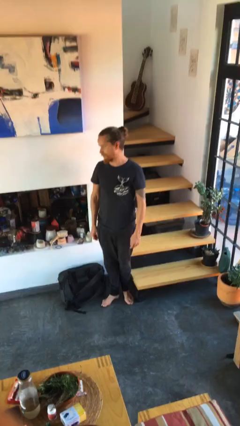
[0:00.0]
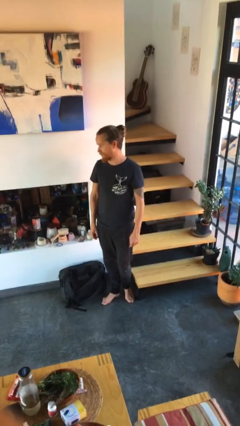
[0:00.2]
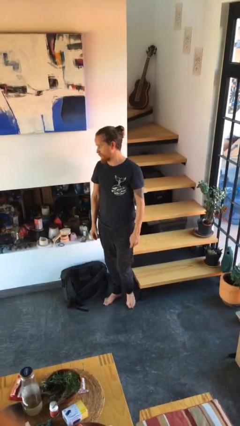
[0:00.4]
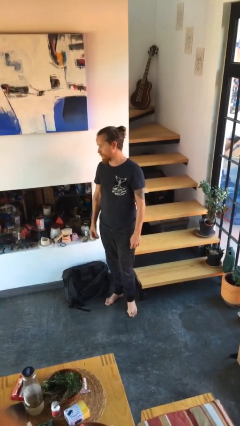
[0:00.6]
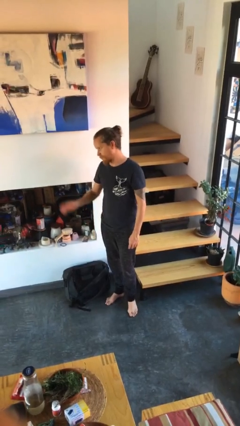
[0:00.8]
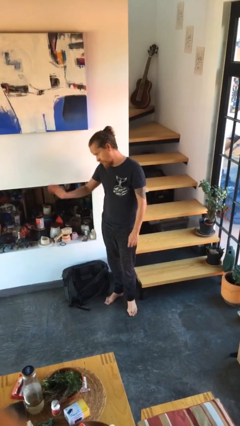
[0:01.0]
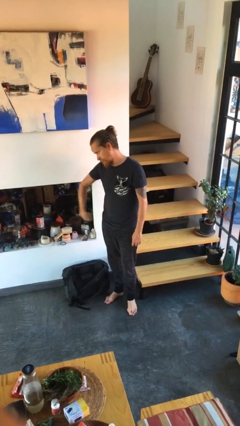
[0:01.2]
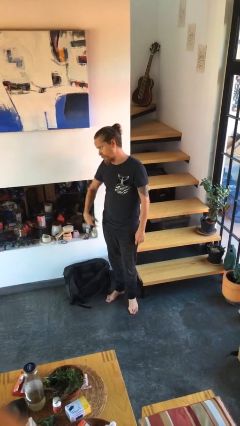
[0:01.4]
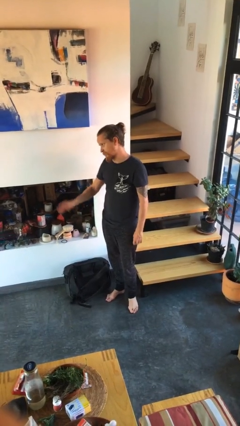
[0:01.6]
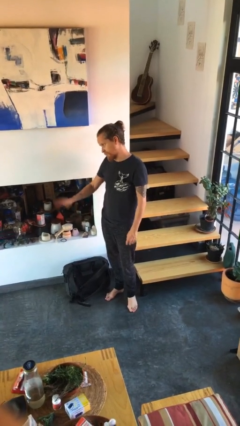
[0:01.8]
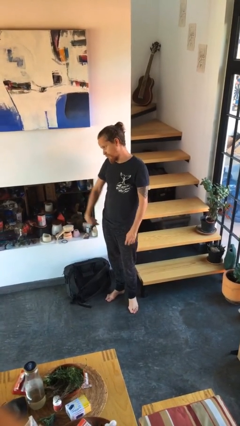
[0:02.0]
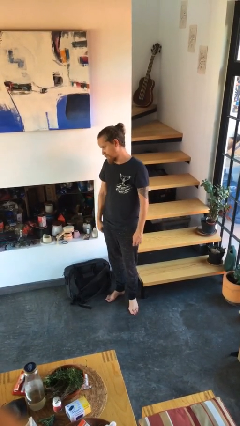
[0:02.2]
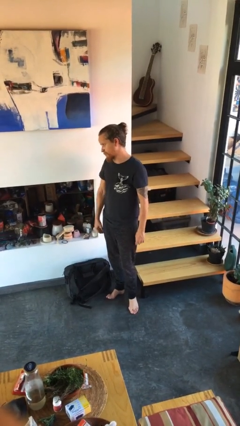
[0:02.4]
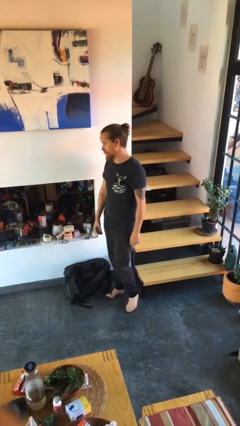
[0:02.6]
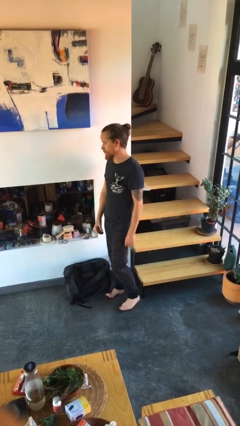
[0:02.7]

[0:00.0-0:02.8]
person gestures come here

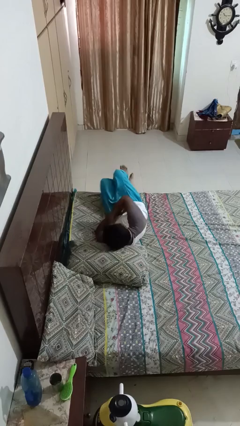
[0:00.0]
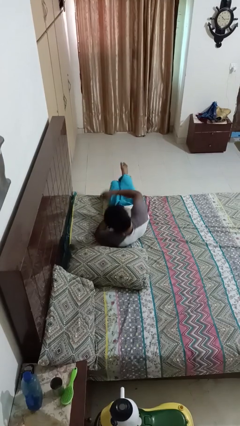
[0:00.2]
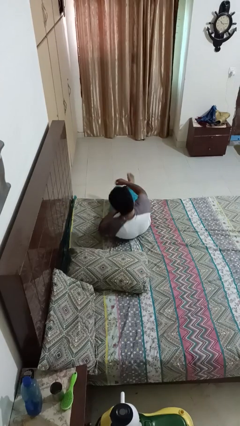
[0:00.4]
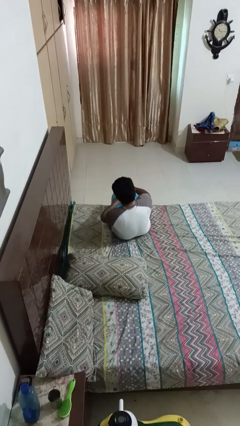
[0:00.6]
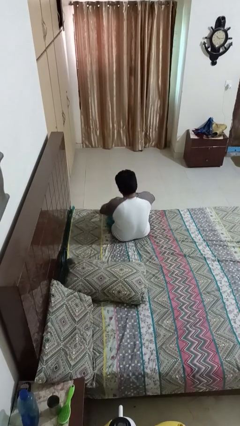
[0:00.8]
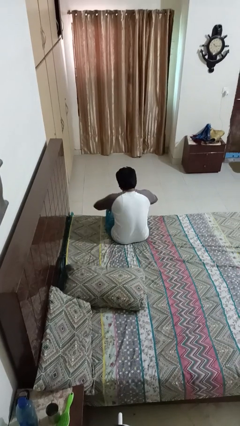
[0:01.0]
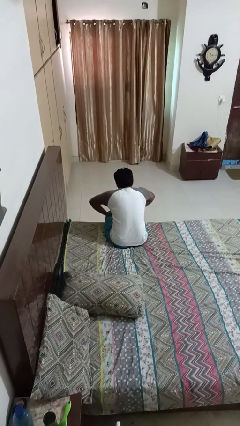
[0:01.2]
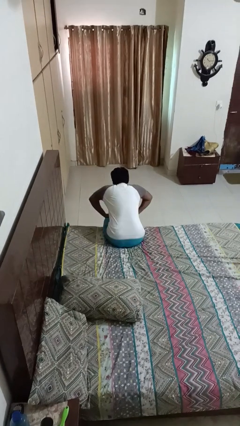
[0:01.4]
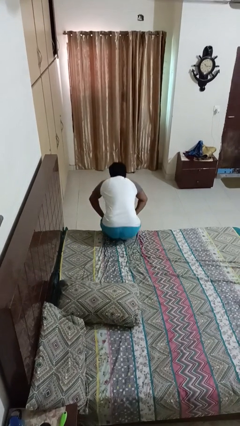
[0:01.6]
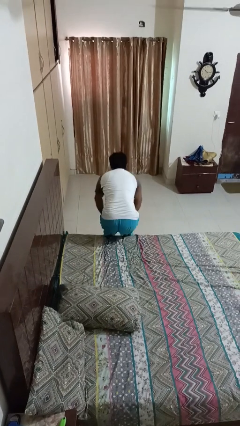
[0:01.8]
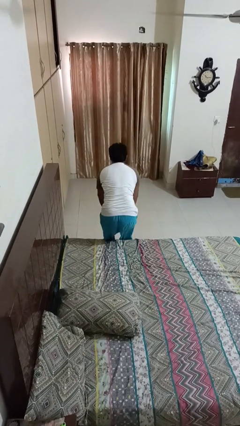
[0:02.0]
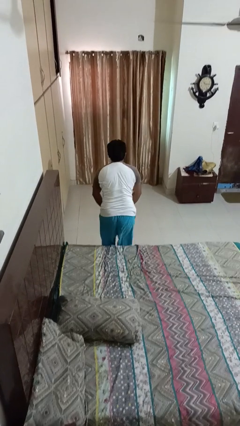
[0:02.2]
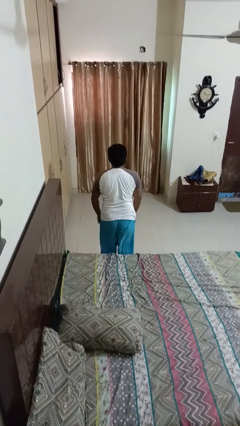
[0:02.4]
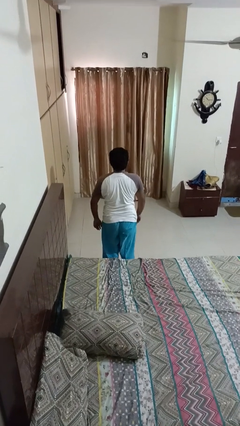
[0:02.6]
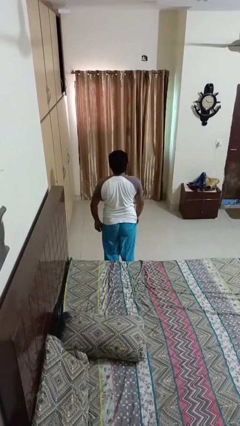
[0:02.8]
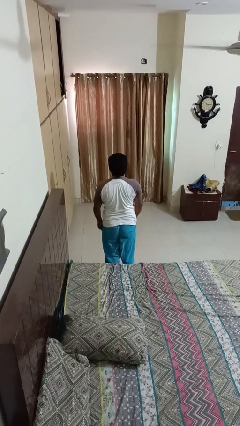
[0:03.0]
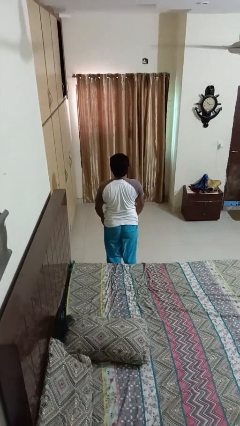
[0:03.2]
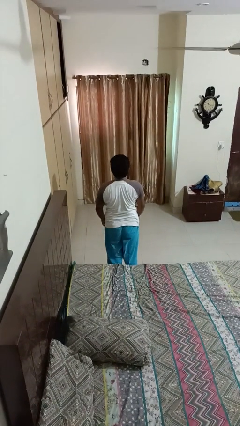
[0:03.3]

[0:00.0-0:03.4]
person stands up

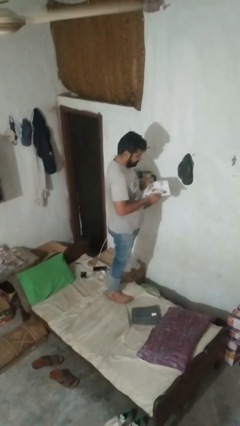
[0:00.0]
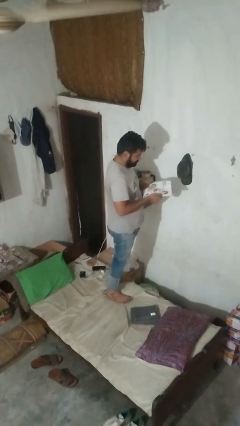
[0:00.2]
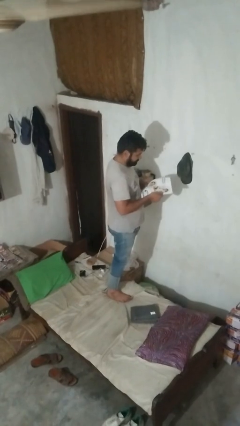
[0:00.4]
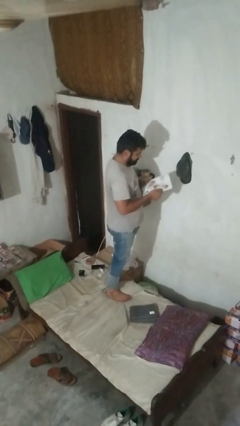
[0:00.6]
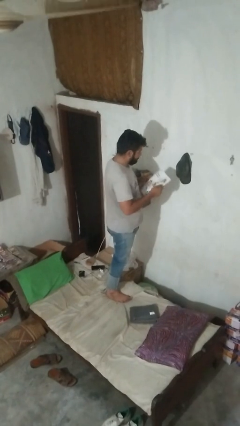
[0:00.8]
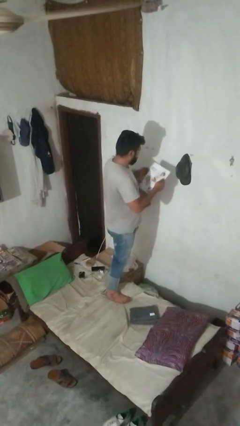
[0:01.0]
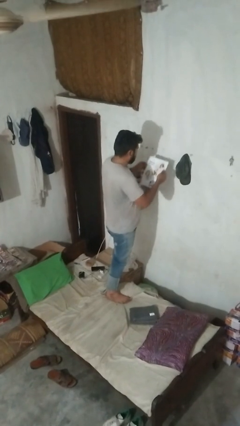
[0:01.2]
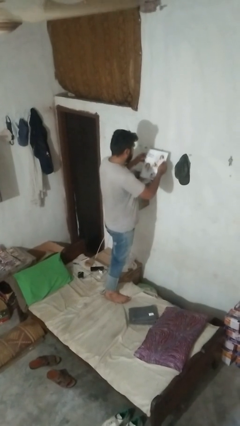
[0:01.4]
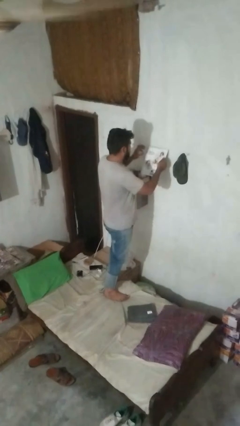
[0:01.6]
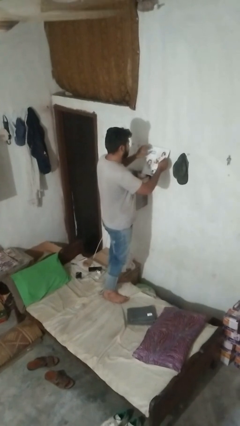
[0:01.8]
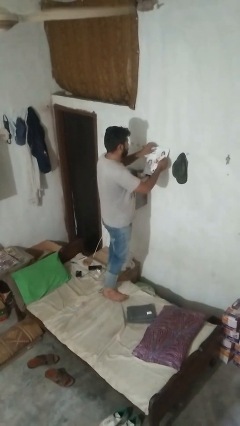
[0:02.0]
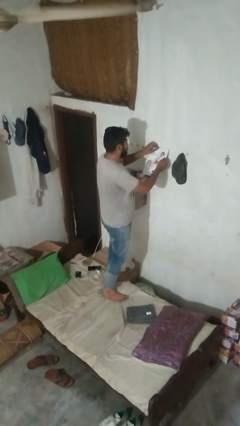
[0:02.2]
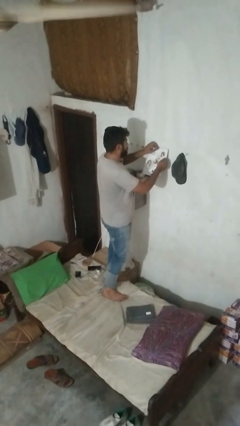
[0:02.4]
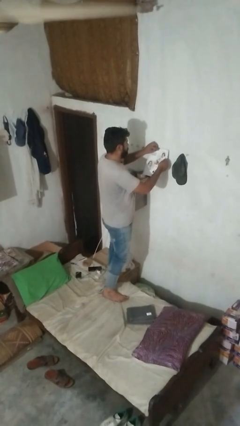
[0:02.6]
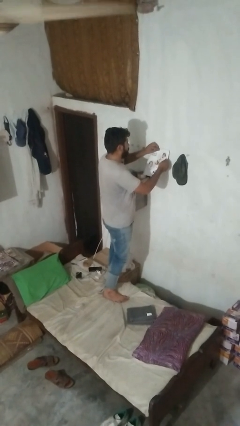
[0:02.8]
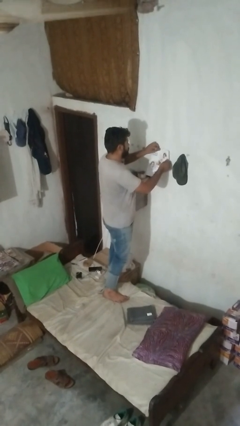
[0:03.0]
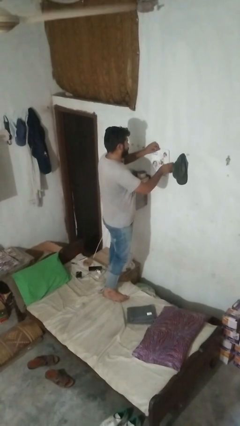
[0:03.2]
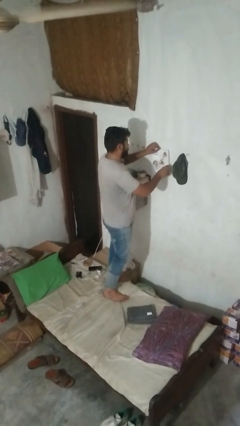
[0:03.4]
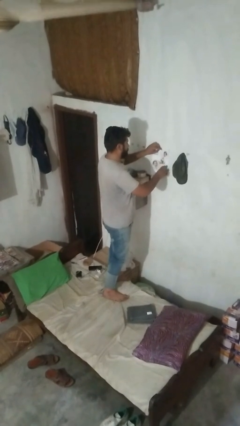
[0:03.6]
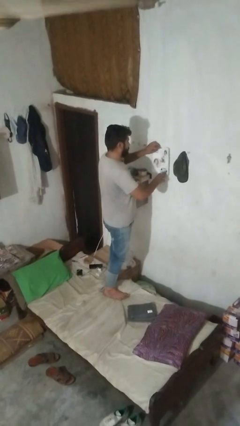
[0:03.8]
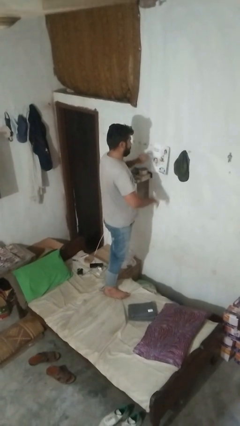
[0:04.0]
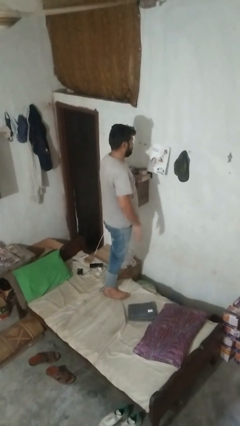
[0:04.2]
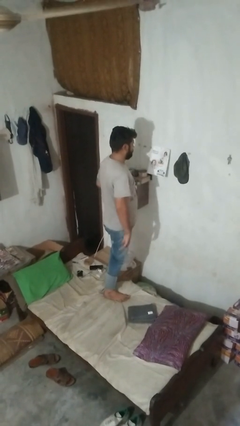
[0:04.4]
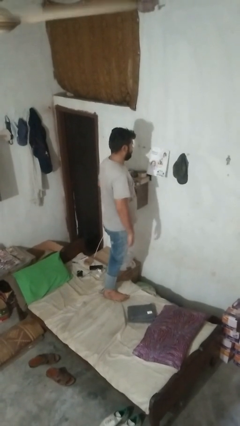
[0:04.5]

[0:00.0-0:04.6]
person puts up picture frame

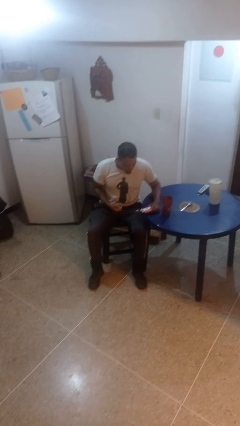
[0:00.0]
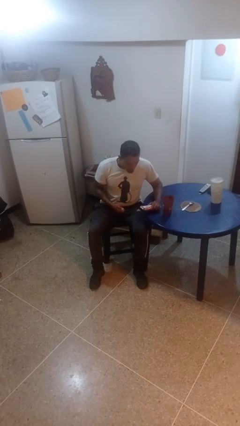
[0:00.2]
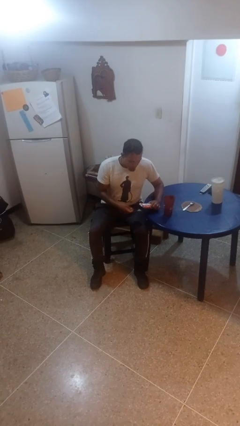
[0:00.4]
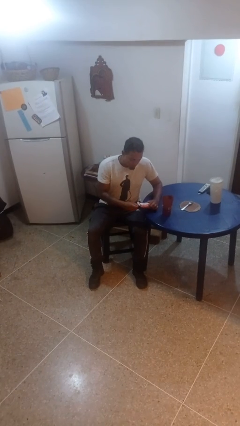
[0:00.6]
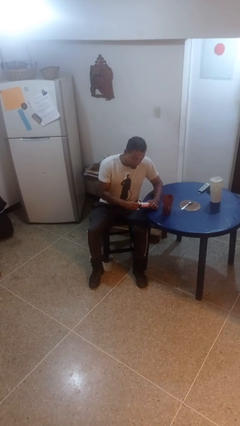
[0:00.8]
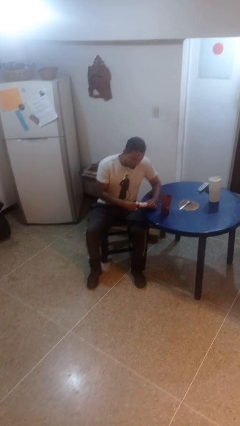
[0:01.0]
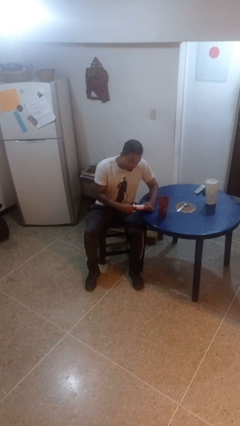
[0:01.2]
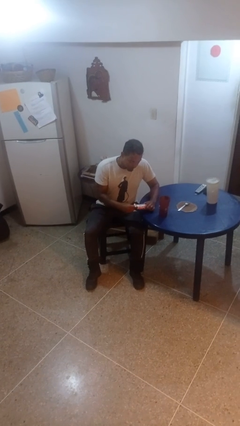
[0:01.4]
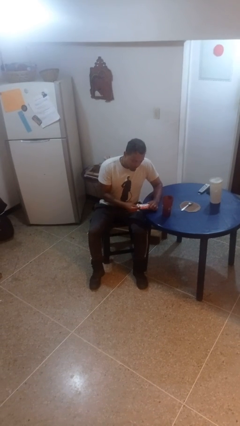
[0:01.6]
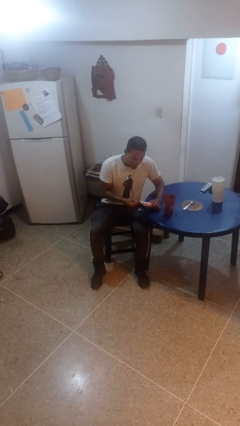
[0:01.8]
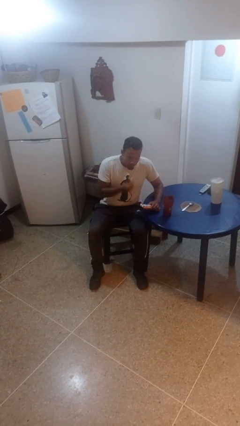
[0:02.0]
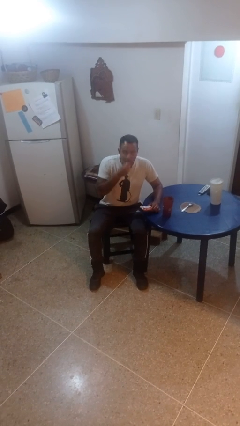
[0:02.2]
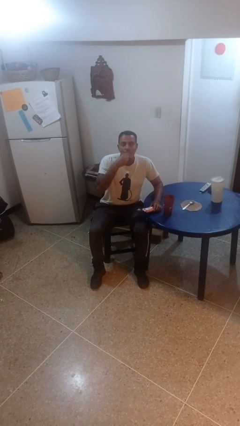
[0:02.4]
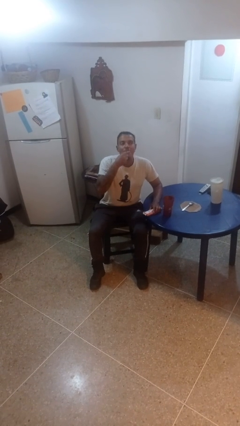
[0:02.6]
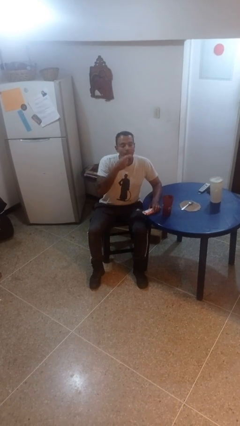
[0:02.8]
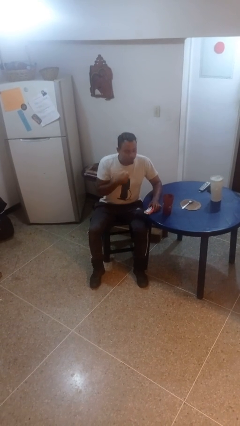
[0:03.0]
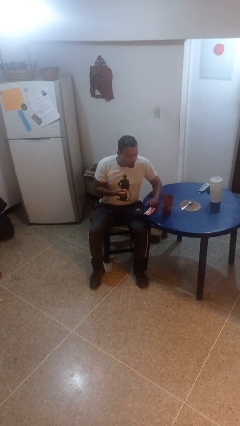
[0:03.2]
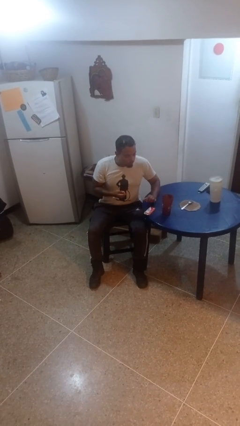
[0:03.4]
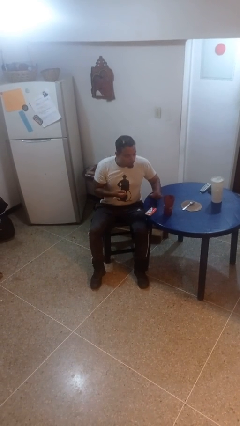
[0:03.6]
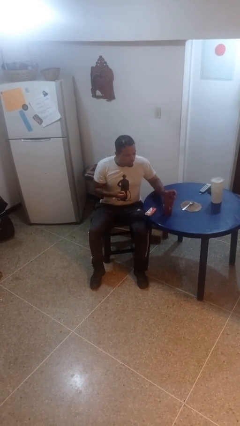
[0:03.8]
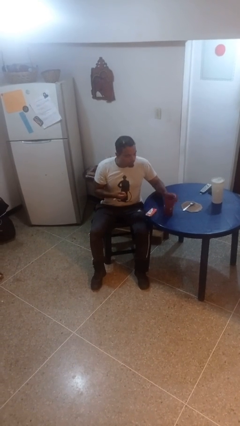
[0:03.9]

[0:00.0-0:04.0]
person takes medicine pills

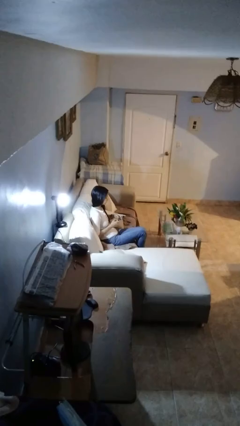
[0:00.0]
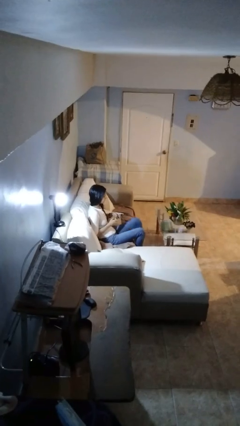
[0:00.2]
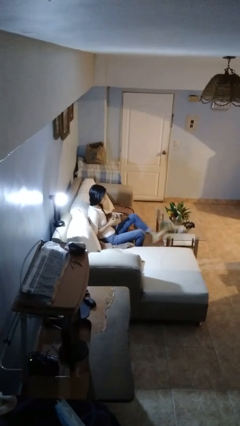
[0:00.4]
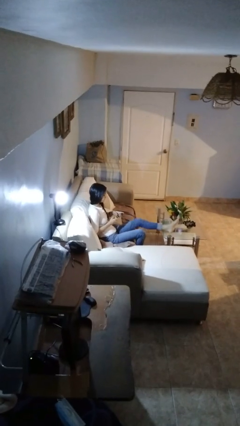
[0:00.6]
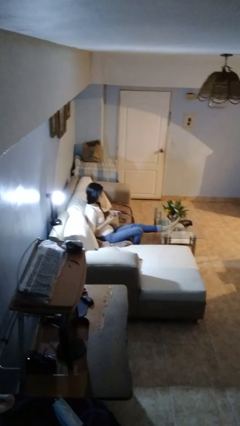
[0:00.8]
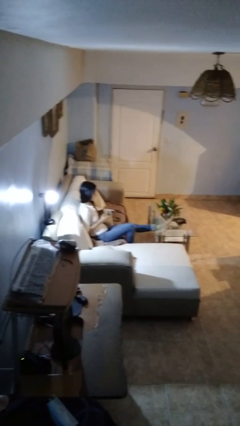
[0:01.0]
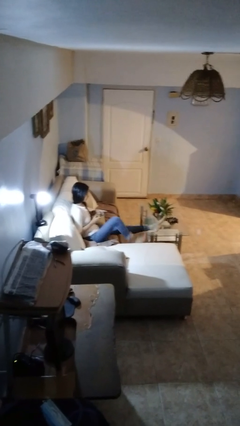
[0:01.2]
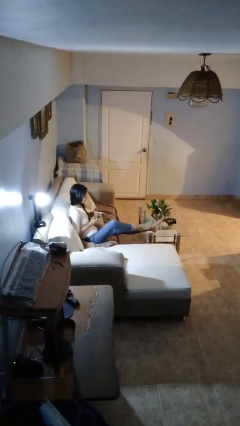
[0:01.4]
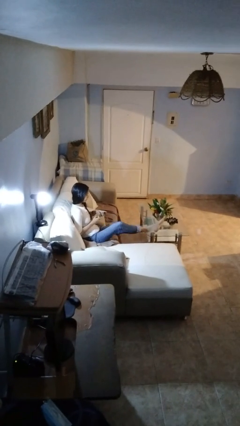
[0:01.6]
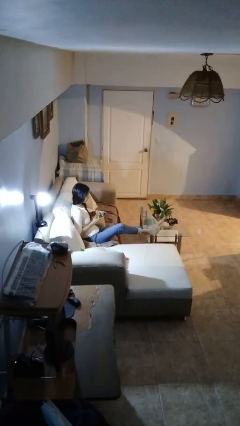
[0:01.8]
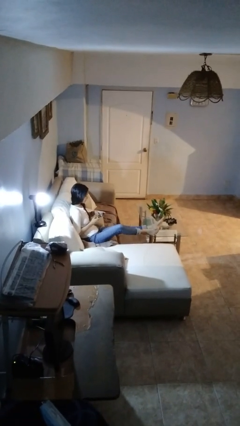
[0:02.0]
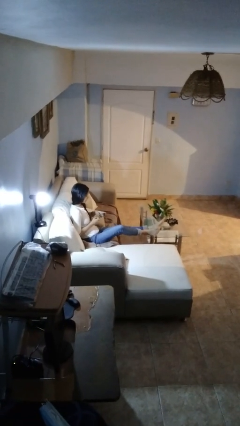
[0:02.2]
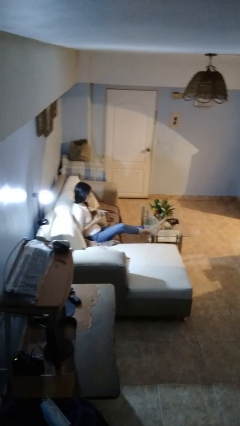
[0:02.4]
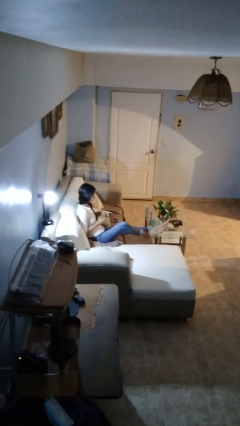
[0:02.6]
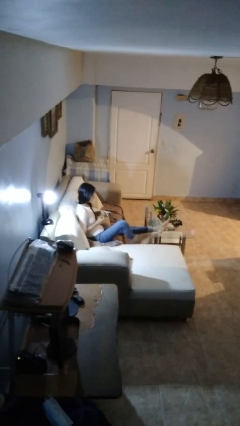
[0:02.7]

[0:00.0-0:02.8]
person puts feet up
